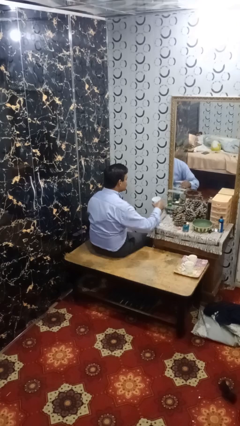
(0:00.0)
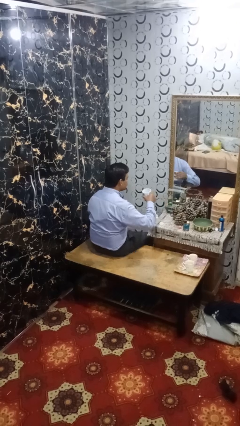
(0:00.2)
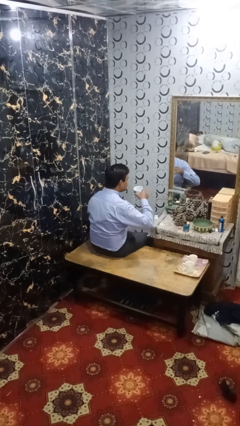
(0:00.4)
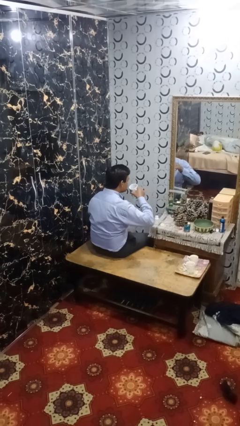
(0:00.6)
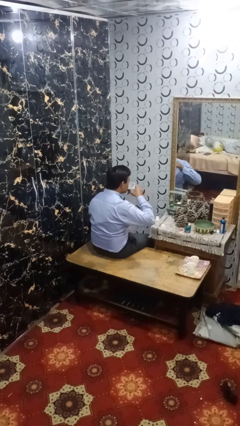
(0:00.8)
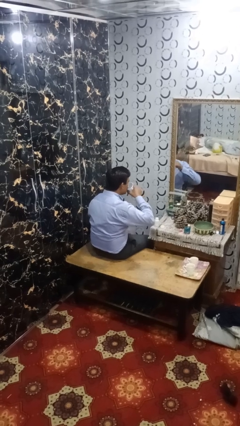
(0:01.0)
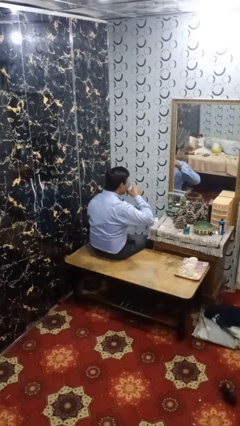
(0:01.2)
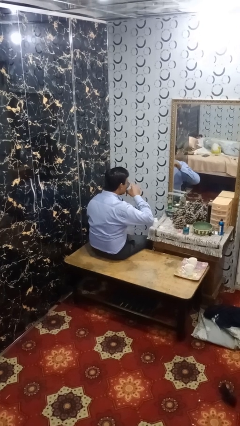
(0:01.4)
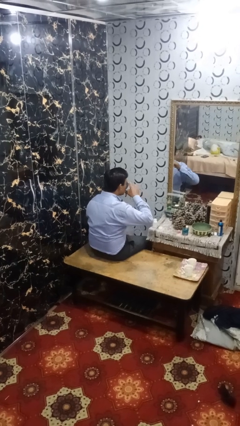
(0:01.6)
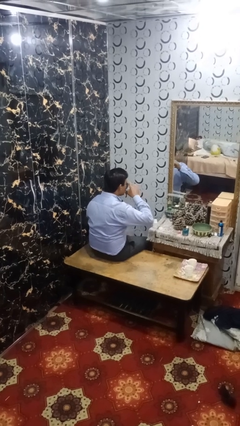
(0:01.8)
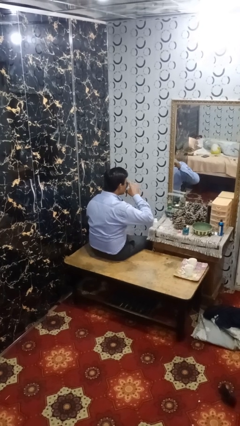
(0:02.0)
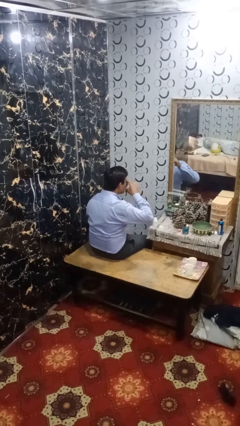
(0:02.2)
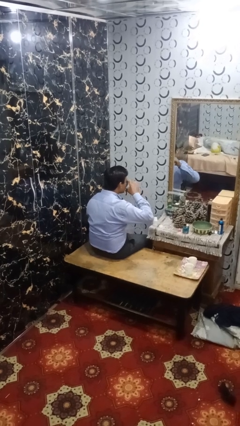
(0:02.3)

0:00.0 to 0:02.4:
person drinks from cup

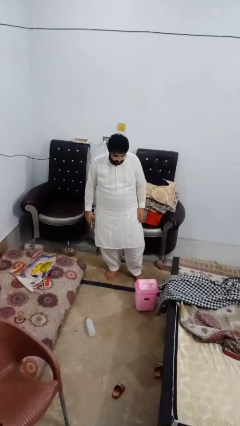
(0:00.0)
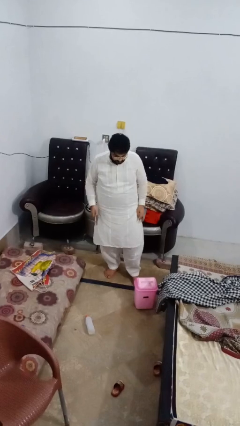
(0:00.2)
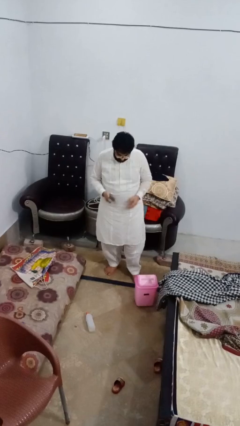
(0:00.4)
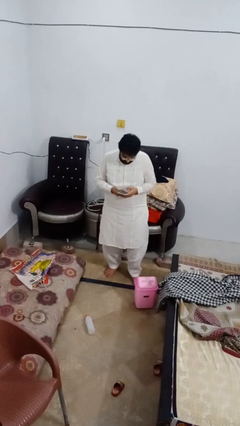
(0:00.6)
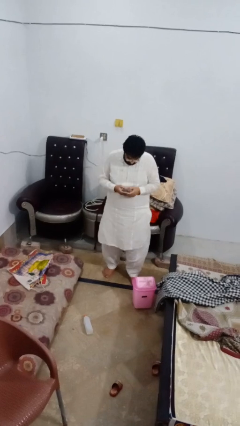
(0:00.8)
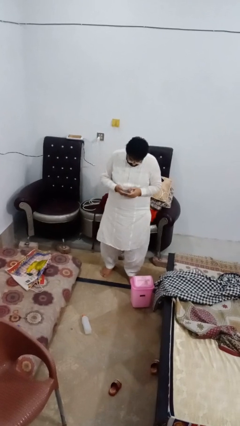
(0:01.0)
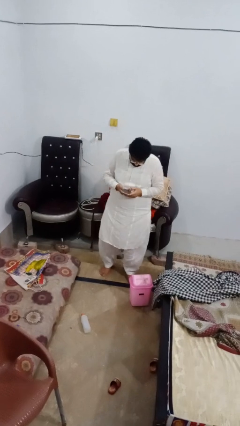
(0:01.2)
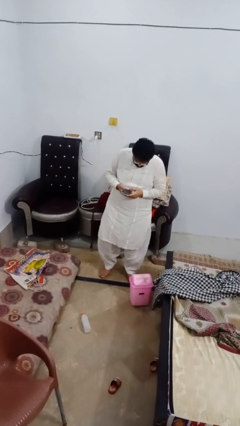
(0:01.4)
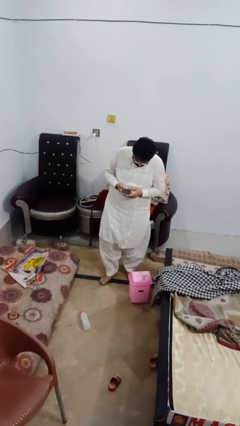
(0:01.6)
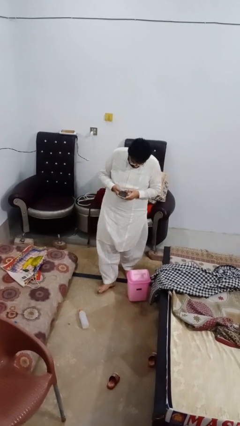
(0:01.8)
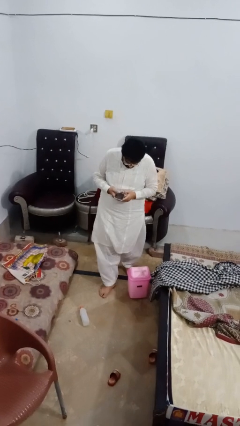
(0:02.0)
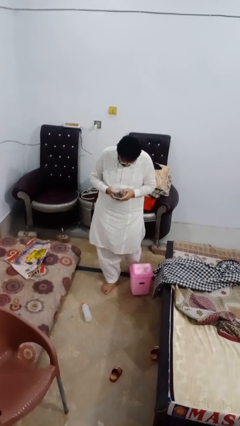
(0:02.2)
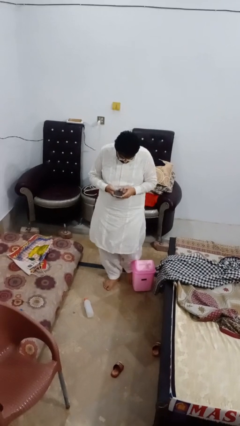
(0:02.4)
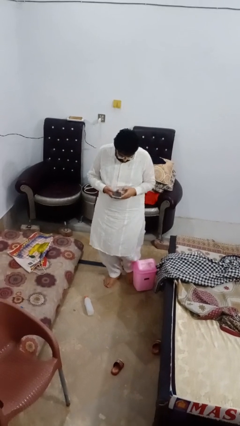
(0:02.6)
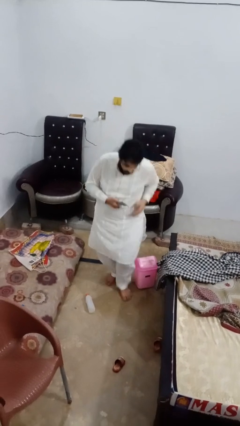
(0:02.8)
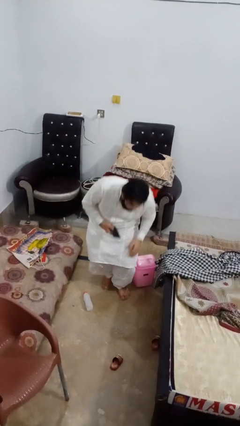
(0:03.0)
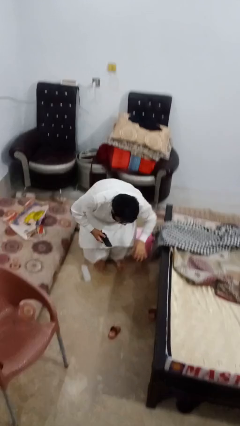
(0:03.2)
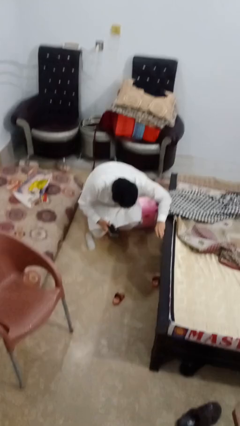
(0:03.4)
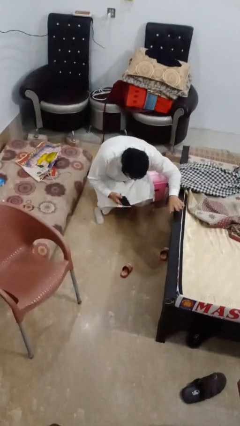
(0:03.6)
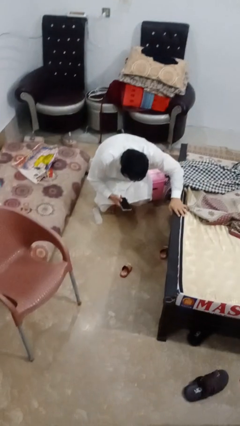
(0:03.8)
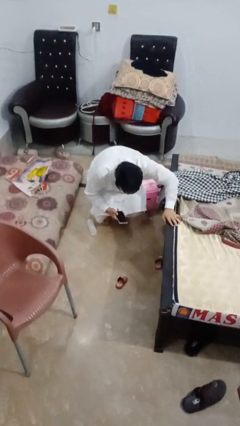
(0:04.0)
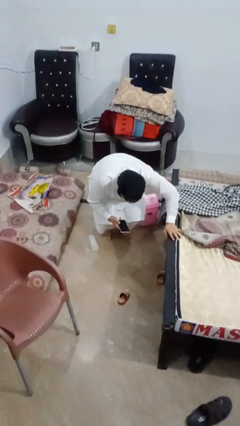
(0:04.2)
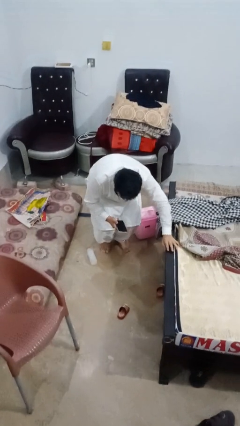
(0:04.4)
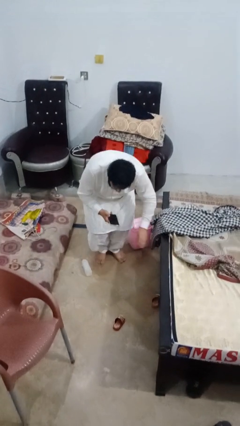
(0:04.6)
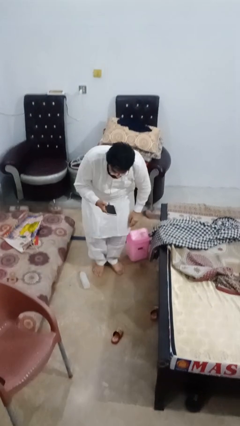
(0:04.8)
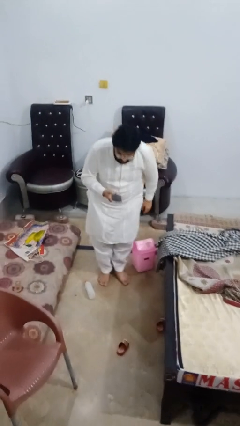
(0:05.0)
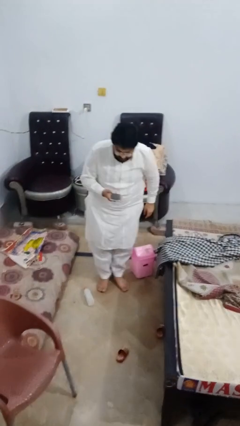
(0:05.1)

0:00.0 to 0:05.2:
person trips on object on floor

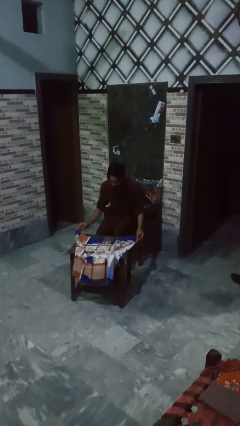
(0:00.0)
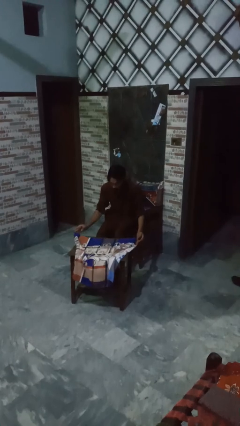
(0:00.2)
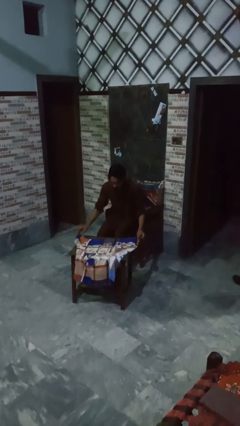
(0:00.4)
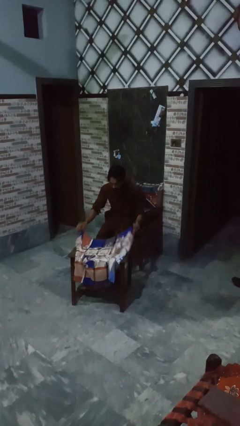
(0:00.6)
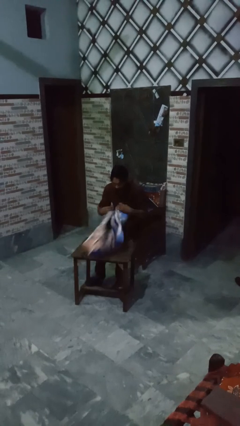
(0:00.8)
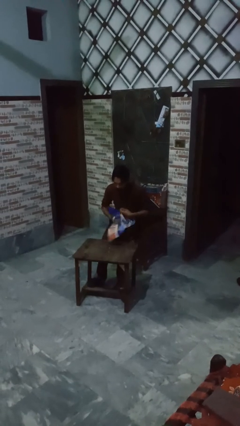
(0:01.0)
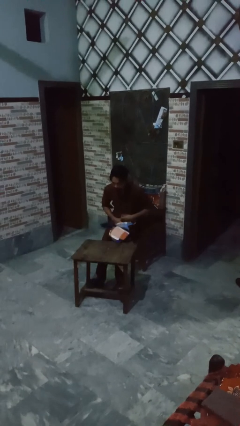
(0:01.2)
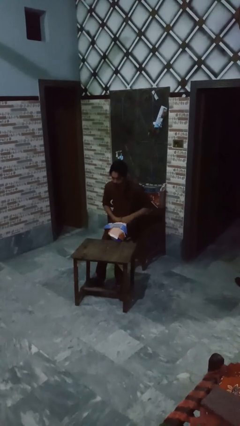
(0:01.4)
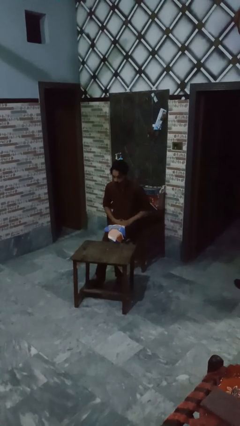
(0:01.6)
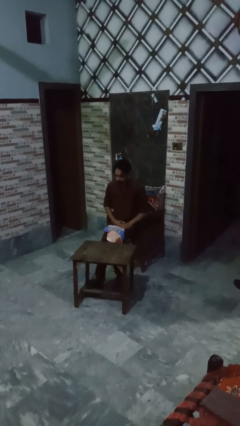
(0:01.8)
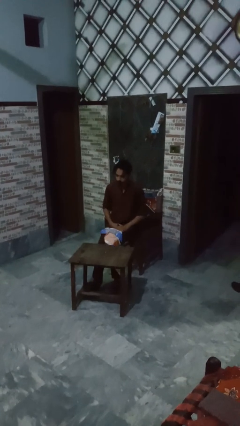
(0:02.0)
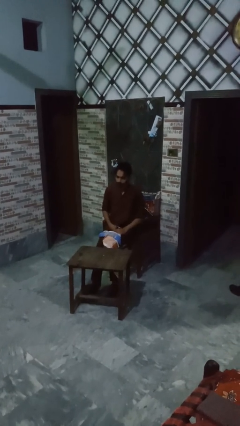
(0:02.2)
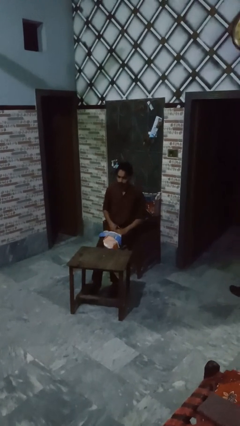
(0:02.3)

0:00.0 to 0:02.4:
person folds tablecloth

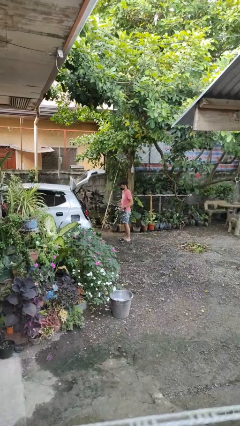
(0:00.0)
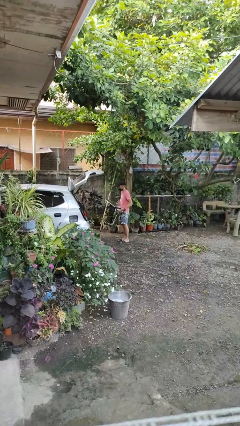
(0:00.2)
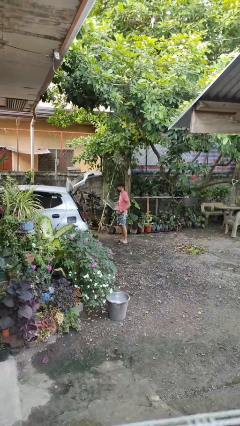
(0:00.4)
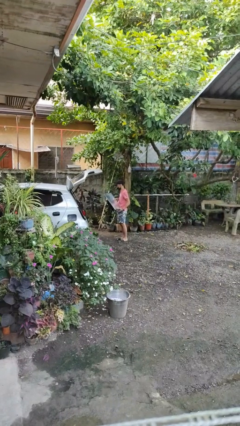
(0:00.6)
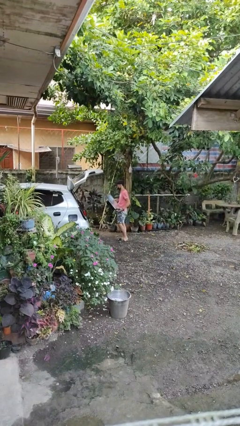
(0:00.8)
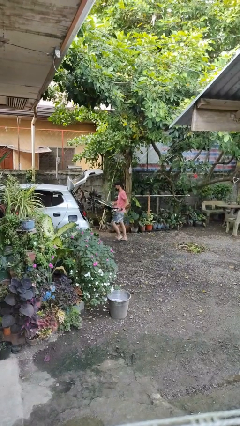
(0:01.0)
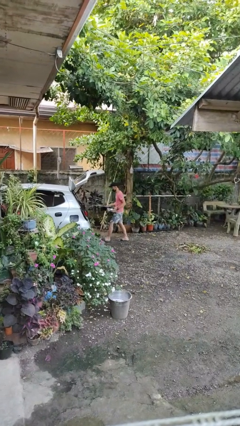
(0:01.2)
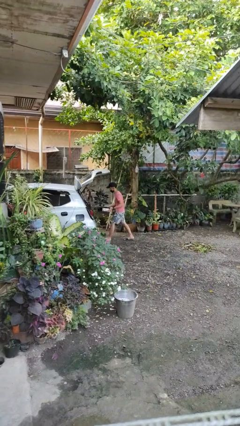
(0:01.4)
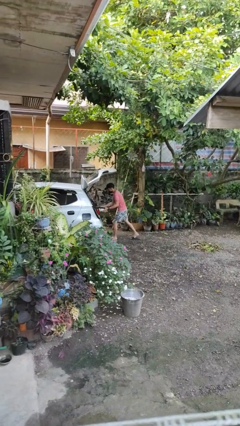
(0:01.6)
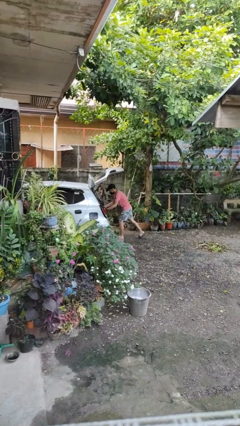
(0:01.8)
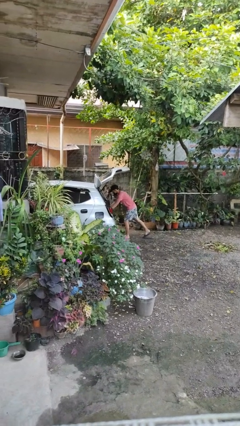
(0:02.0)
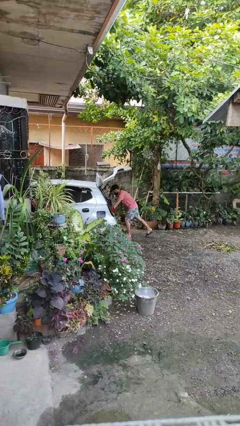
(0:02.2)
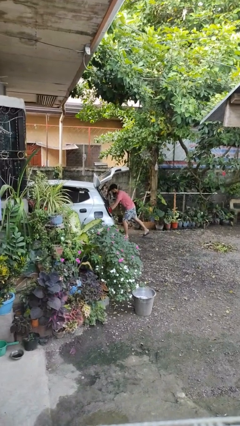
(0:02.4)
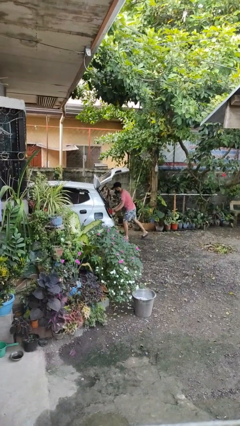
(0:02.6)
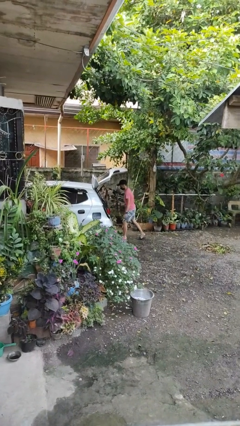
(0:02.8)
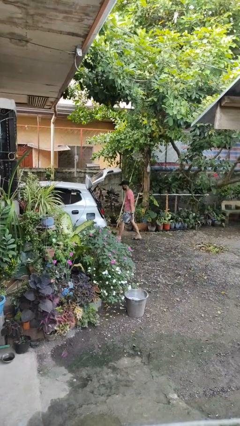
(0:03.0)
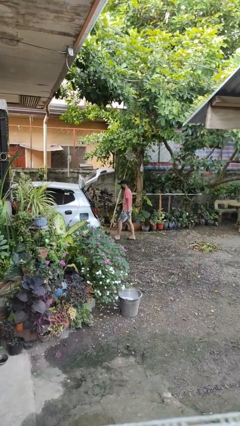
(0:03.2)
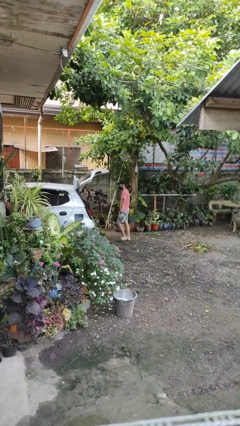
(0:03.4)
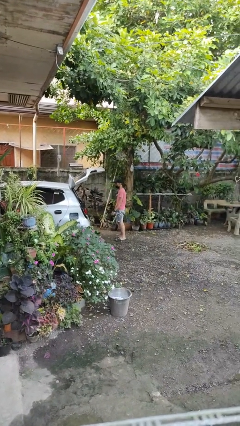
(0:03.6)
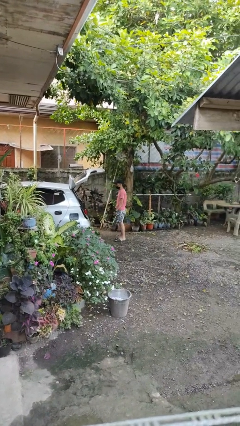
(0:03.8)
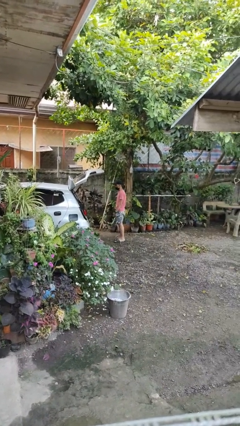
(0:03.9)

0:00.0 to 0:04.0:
person loads car

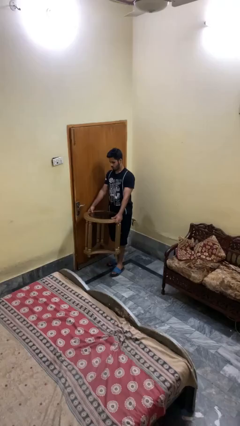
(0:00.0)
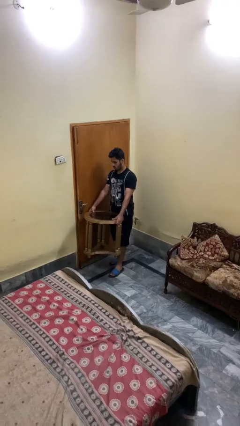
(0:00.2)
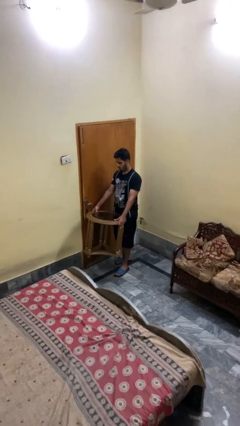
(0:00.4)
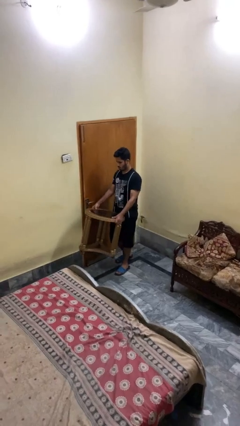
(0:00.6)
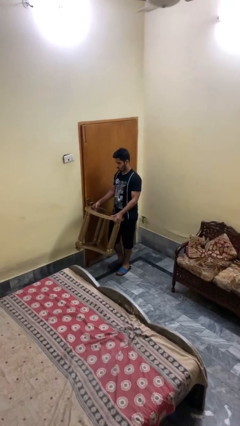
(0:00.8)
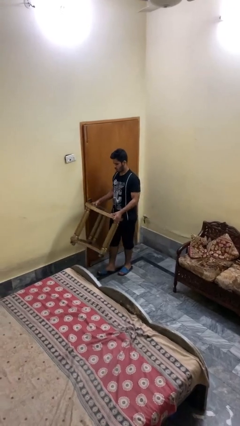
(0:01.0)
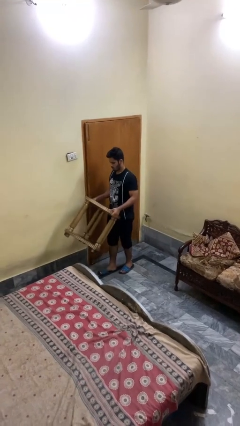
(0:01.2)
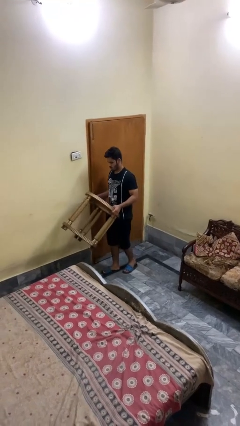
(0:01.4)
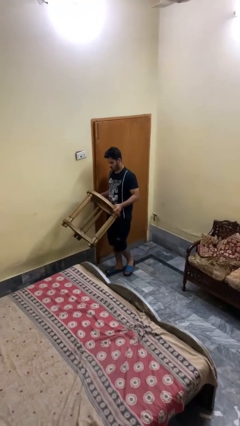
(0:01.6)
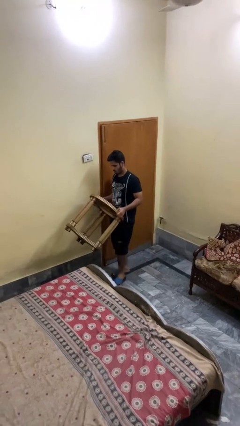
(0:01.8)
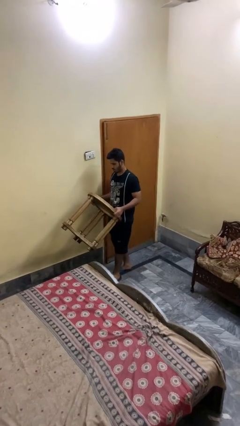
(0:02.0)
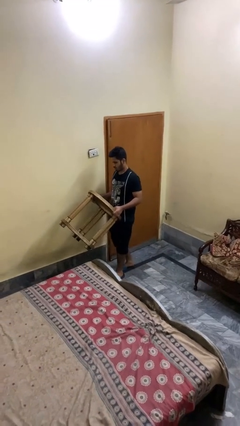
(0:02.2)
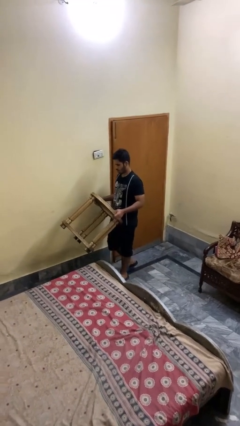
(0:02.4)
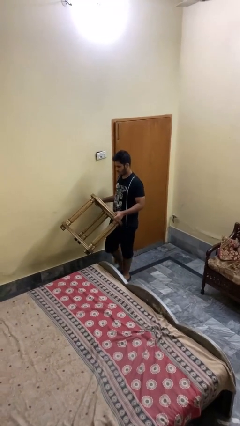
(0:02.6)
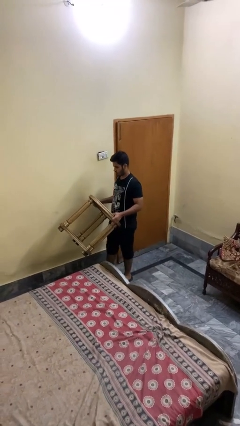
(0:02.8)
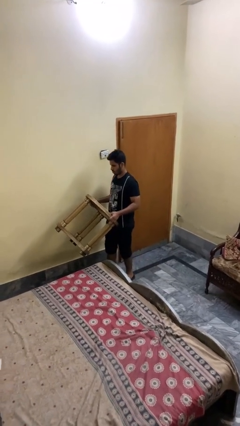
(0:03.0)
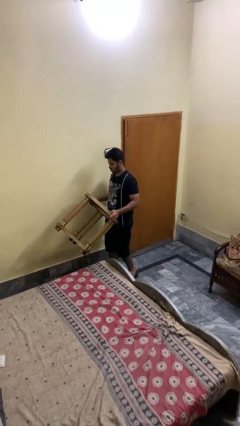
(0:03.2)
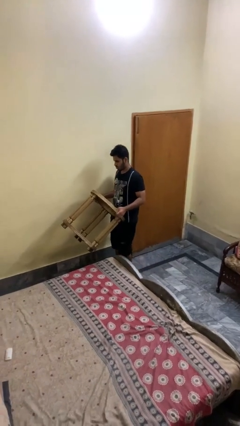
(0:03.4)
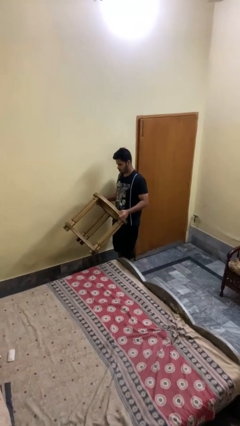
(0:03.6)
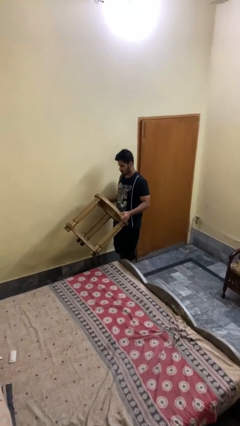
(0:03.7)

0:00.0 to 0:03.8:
person carries furniture
